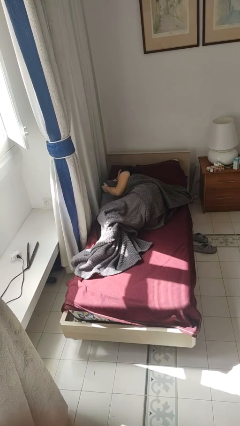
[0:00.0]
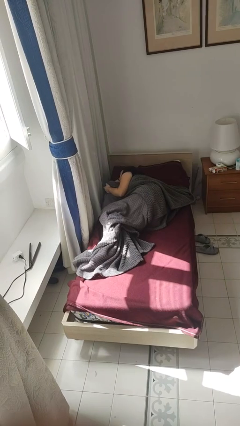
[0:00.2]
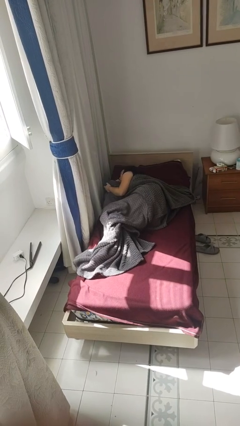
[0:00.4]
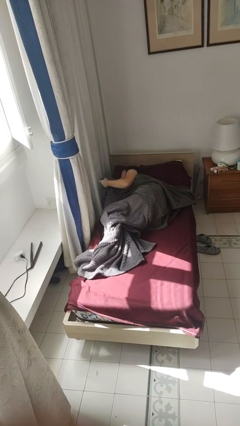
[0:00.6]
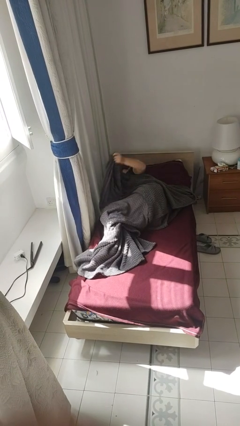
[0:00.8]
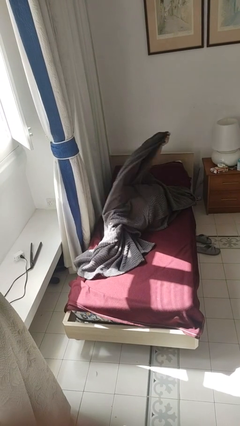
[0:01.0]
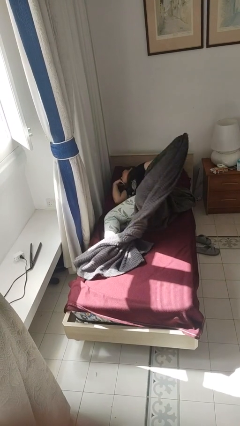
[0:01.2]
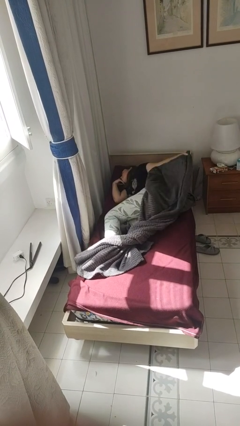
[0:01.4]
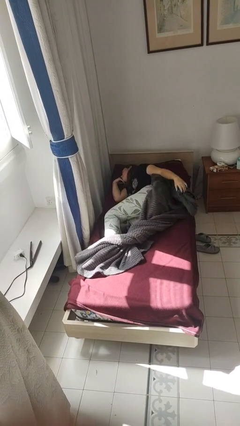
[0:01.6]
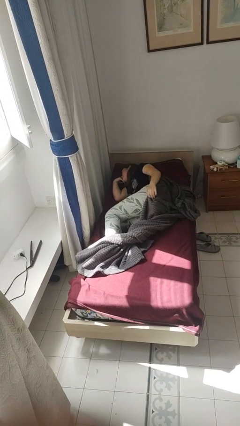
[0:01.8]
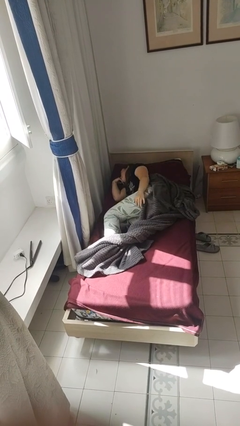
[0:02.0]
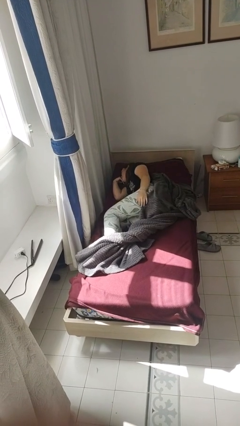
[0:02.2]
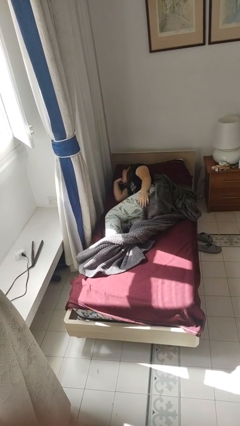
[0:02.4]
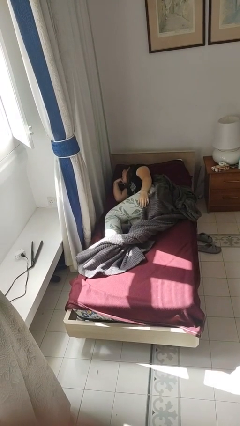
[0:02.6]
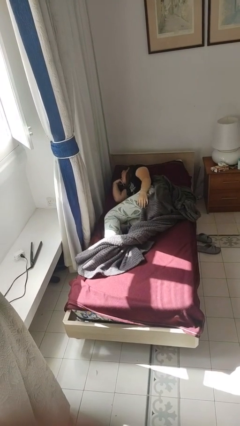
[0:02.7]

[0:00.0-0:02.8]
person uncovers with bedsheets

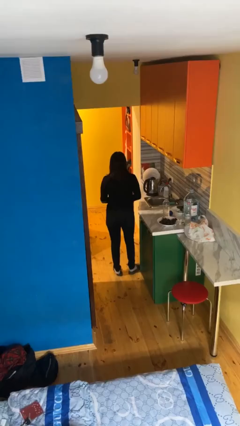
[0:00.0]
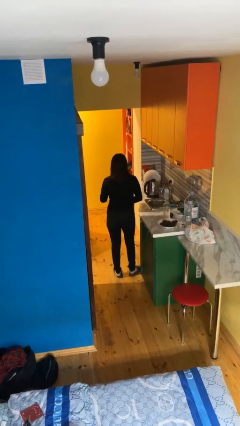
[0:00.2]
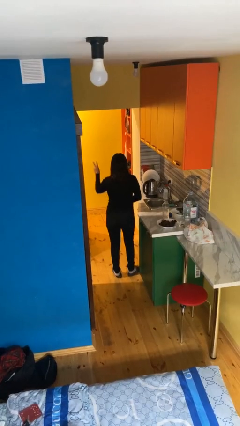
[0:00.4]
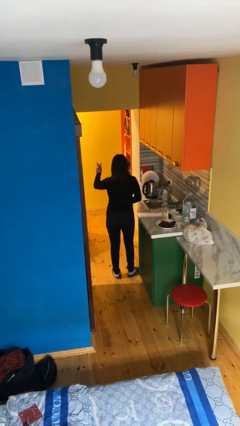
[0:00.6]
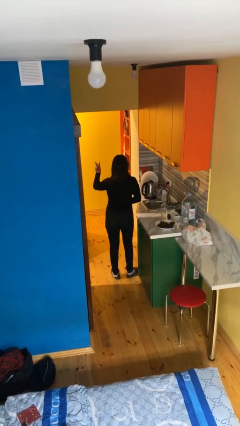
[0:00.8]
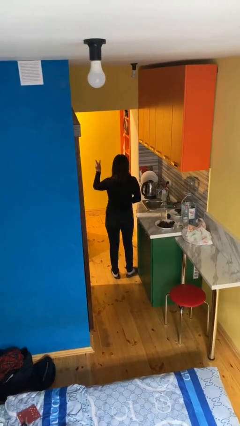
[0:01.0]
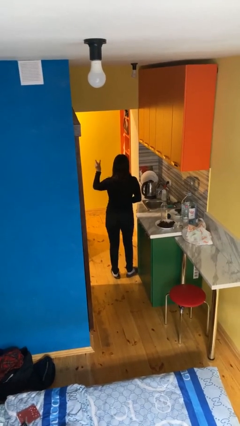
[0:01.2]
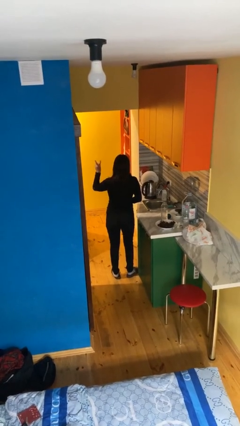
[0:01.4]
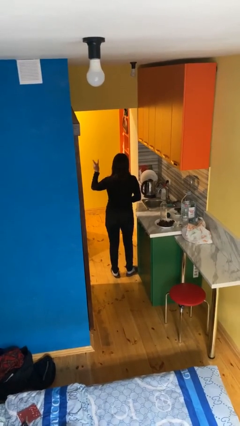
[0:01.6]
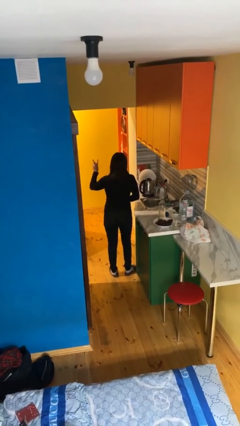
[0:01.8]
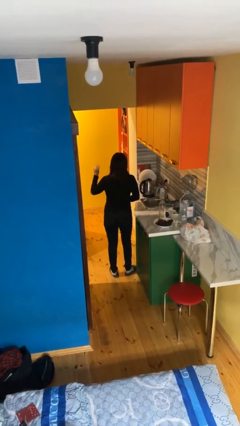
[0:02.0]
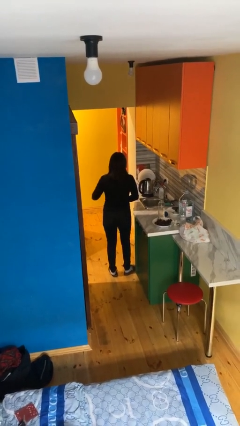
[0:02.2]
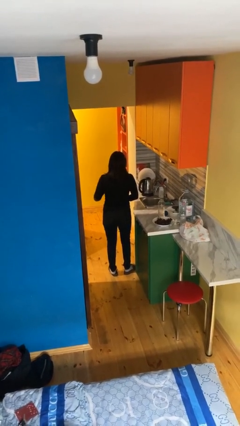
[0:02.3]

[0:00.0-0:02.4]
person gestures peace

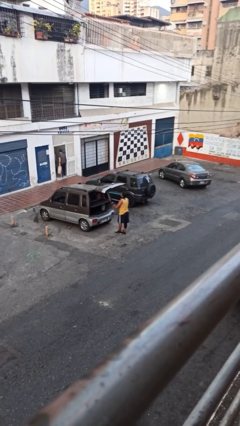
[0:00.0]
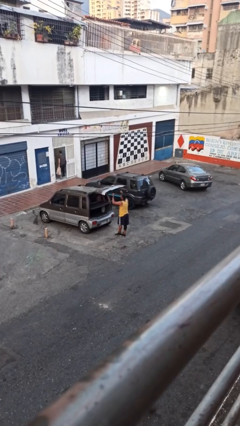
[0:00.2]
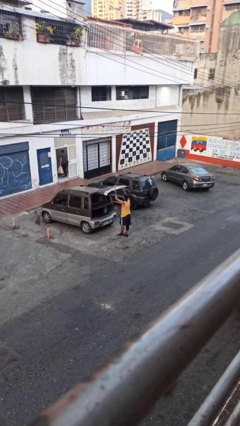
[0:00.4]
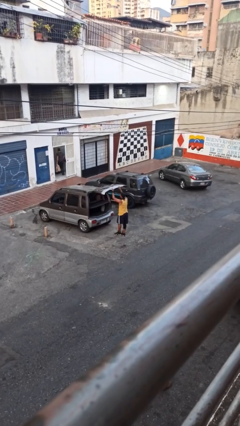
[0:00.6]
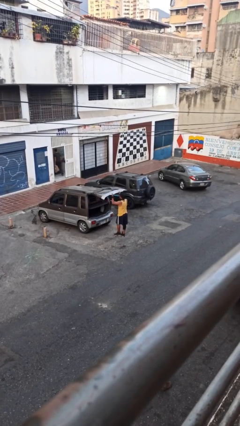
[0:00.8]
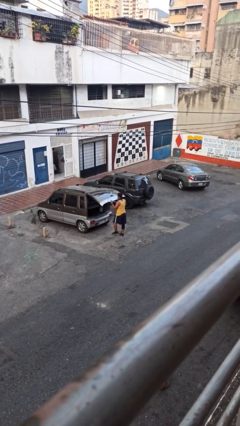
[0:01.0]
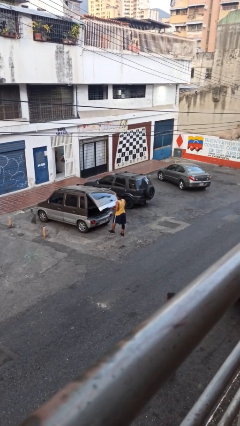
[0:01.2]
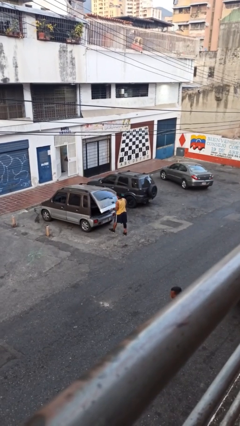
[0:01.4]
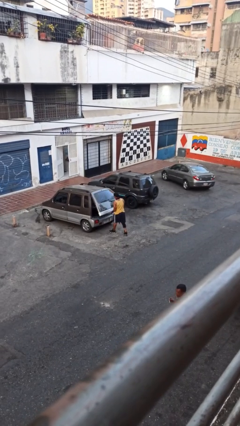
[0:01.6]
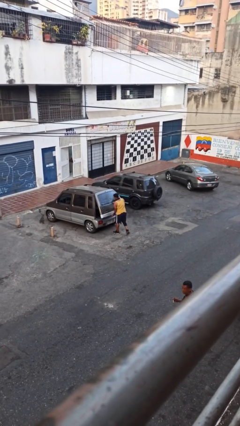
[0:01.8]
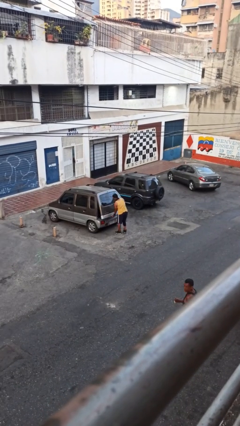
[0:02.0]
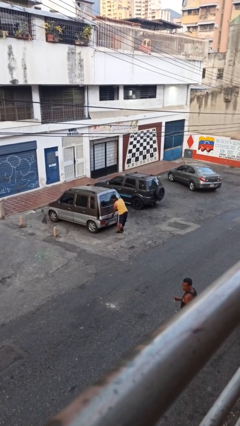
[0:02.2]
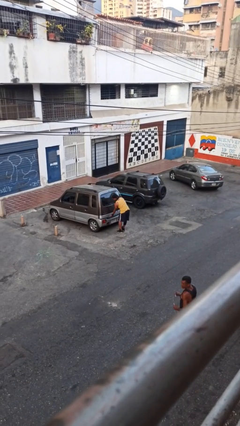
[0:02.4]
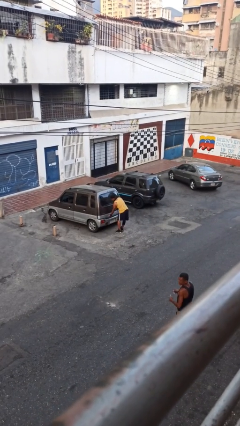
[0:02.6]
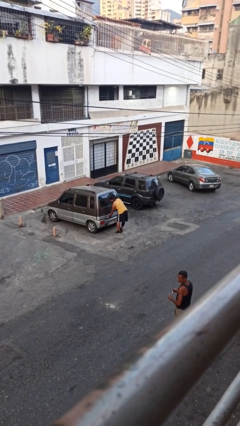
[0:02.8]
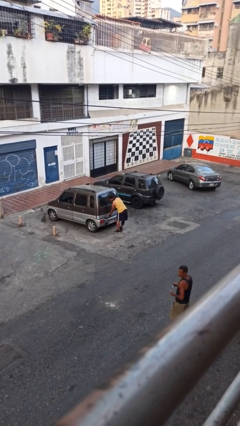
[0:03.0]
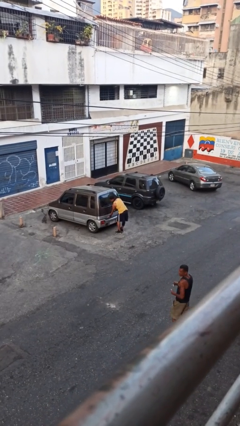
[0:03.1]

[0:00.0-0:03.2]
person closes car trunk

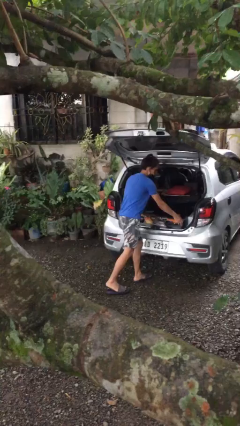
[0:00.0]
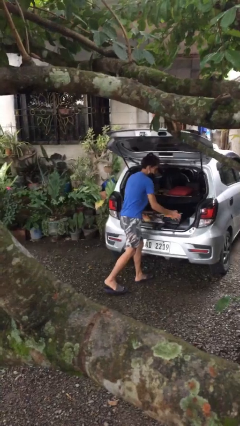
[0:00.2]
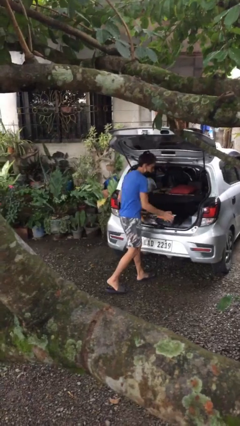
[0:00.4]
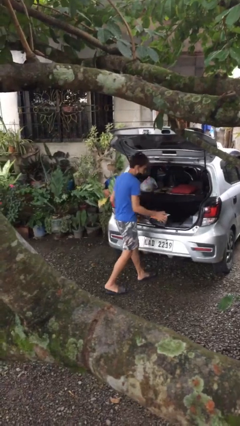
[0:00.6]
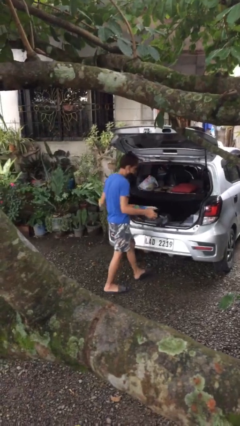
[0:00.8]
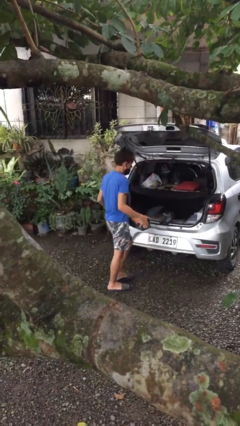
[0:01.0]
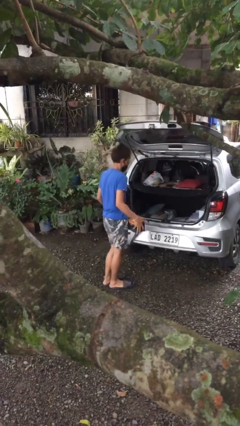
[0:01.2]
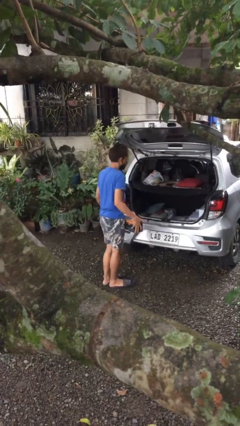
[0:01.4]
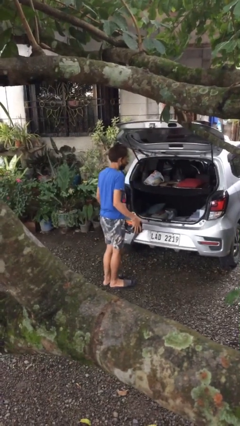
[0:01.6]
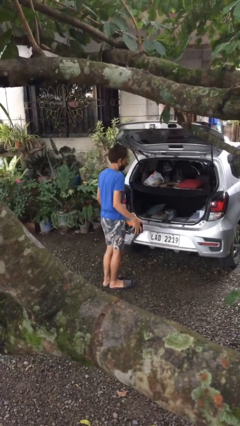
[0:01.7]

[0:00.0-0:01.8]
person unloads car

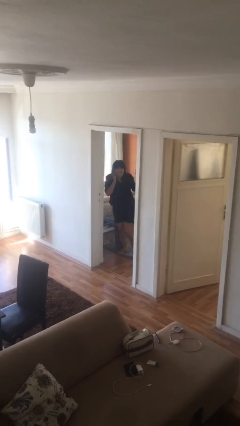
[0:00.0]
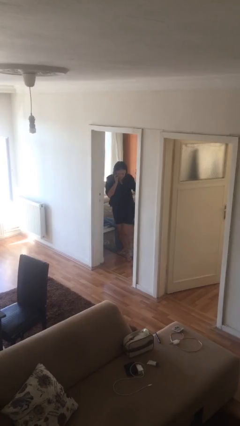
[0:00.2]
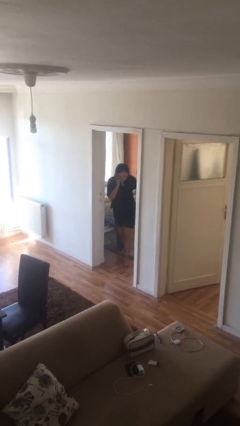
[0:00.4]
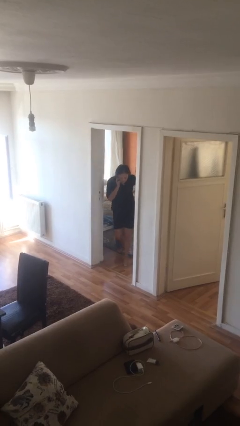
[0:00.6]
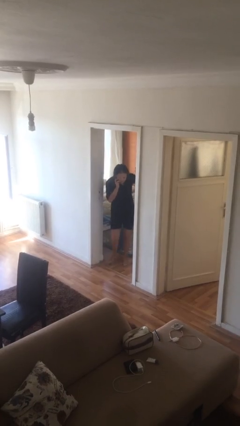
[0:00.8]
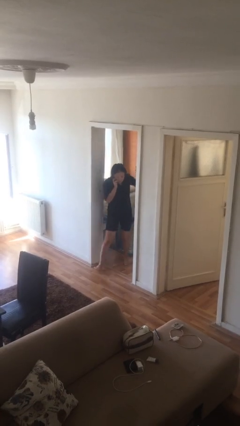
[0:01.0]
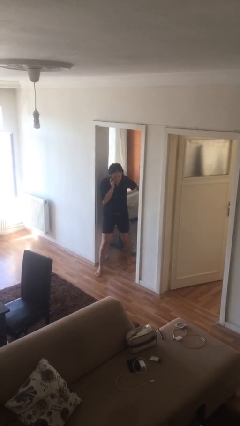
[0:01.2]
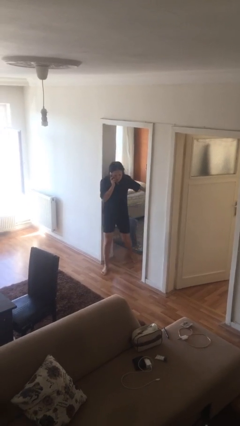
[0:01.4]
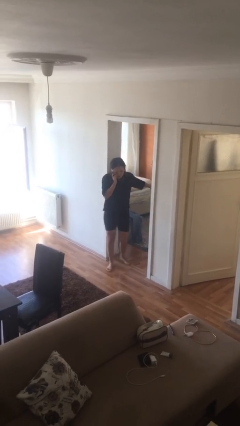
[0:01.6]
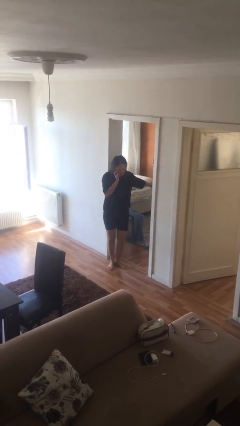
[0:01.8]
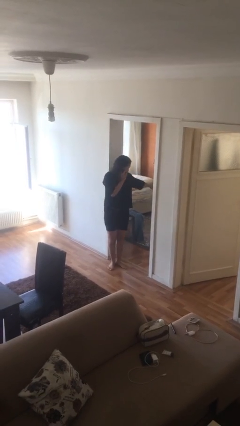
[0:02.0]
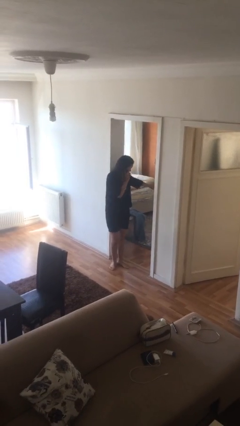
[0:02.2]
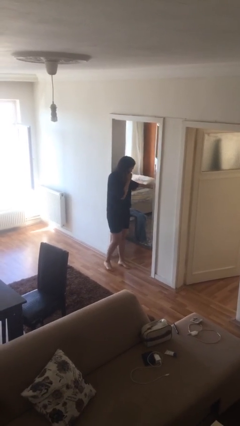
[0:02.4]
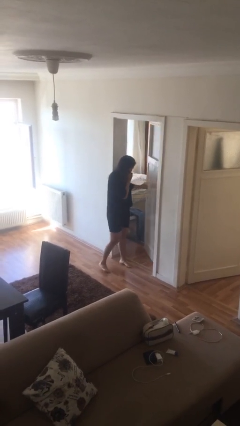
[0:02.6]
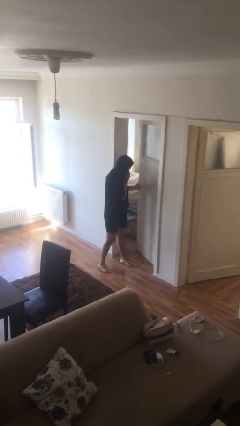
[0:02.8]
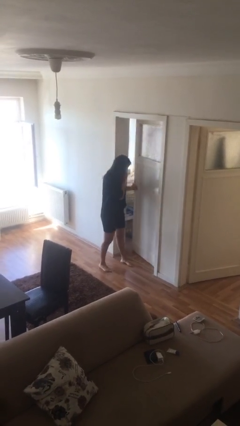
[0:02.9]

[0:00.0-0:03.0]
person enters scene through structure

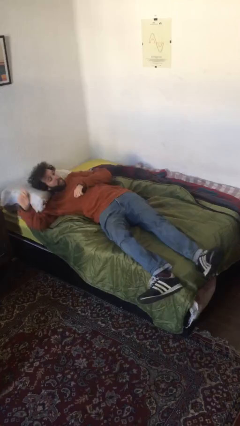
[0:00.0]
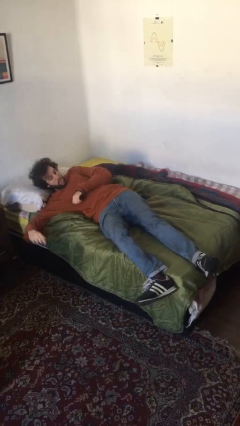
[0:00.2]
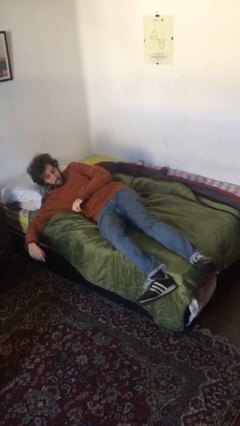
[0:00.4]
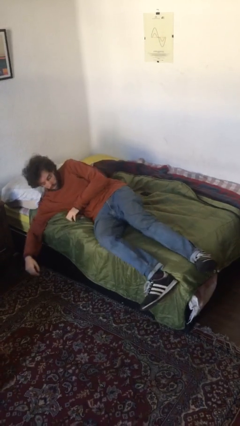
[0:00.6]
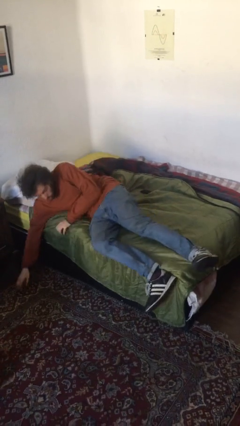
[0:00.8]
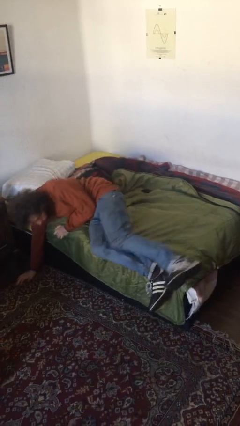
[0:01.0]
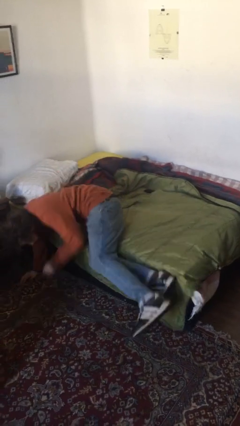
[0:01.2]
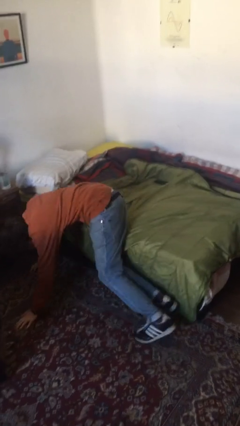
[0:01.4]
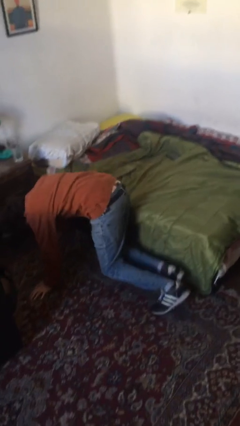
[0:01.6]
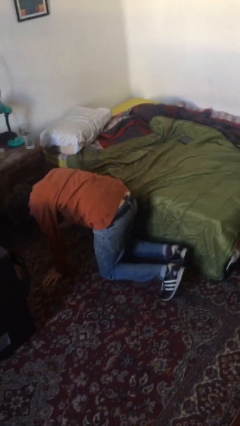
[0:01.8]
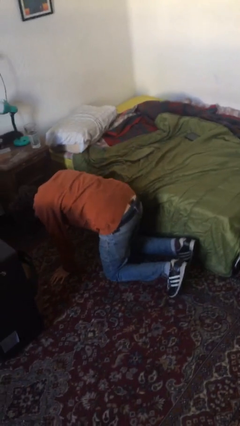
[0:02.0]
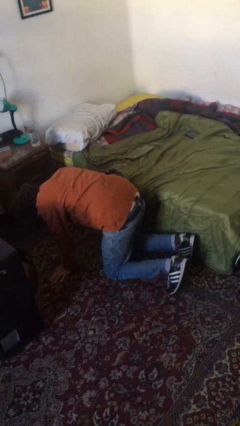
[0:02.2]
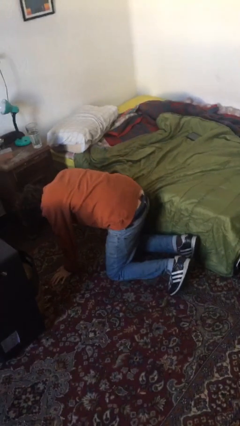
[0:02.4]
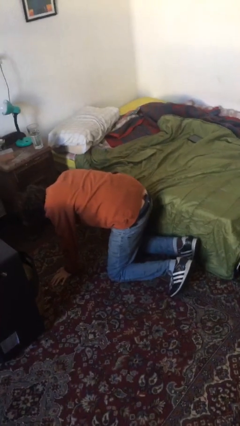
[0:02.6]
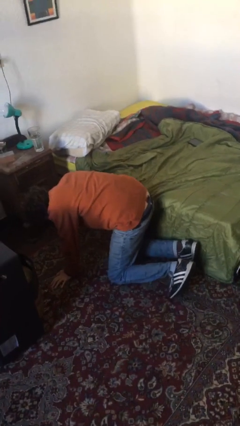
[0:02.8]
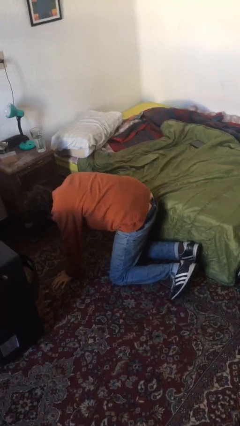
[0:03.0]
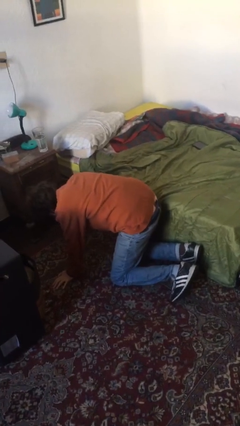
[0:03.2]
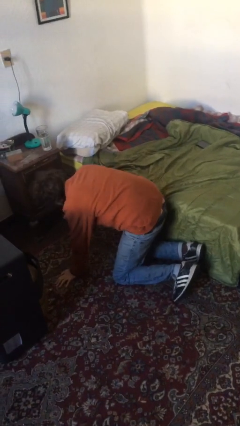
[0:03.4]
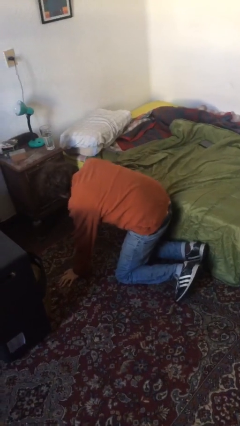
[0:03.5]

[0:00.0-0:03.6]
person falls from bed

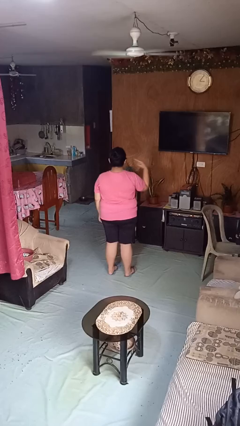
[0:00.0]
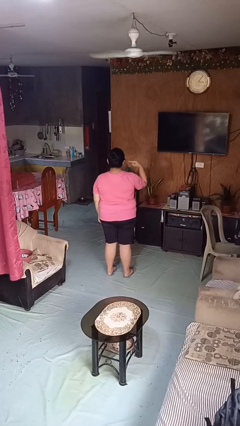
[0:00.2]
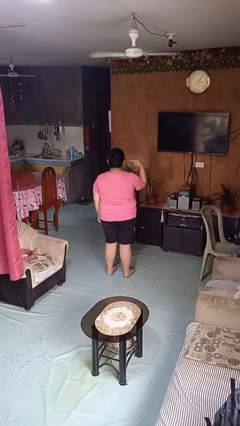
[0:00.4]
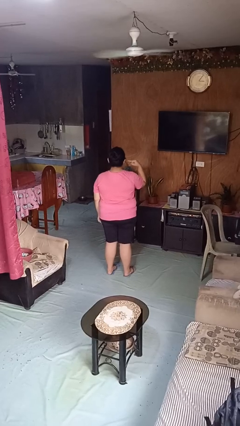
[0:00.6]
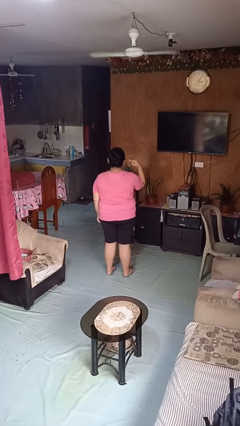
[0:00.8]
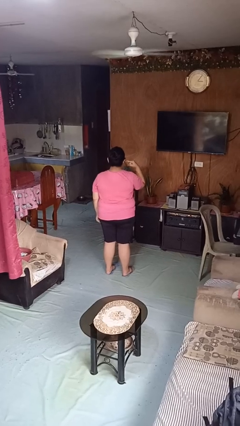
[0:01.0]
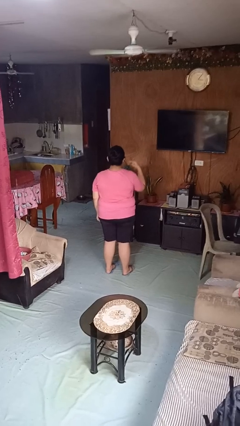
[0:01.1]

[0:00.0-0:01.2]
person gestures listen closely
